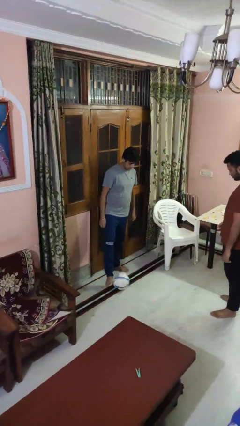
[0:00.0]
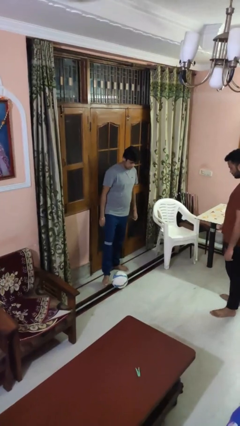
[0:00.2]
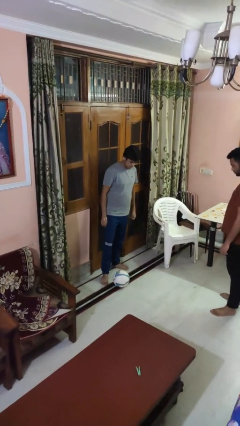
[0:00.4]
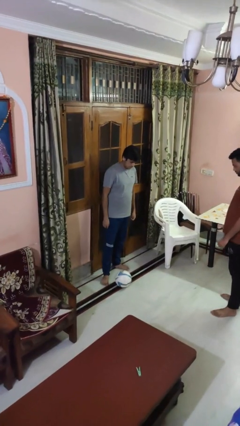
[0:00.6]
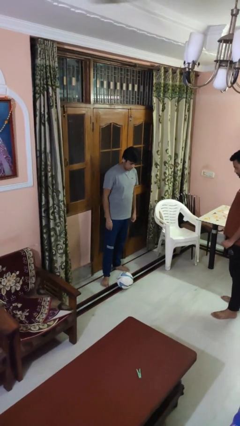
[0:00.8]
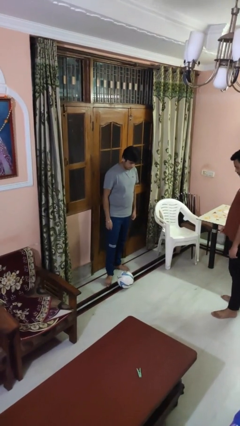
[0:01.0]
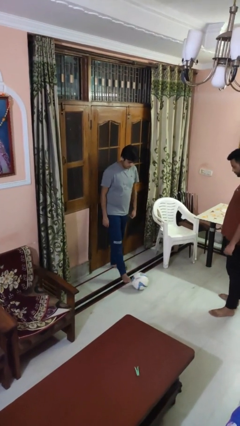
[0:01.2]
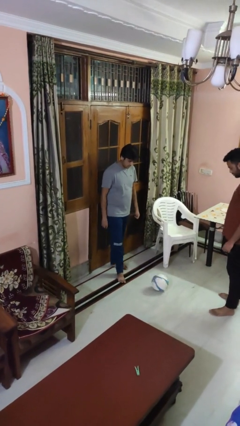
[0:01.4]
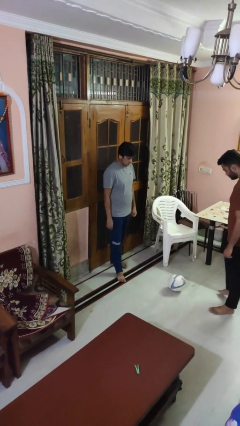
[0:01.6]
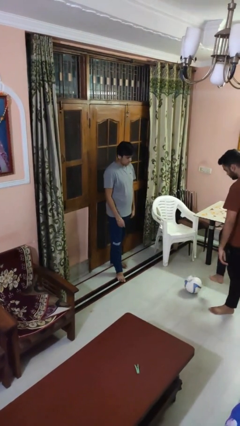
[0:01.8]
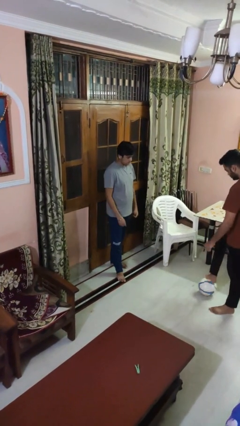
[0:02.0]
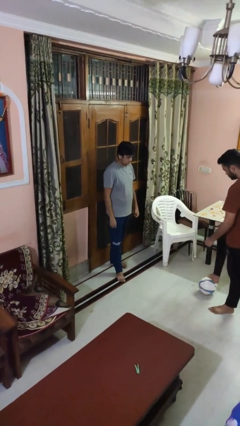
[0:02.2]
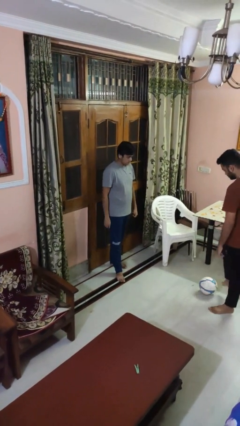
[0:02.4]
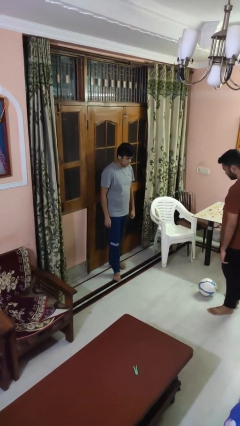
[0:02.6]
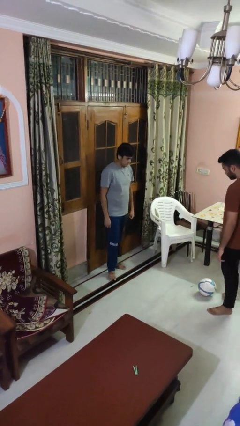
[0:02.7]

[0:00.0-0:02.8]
person kicks object to person

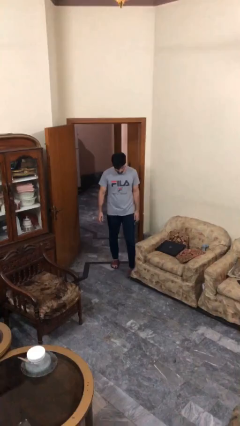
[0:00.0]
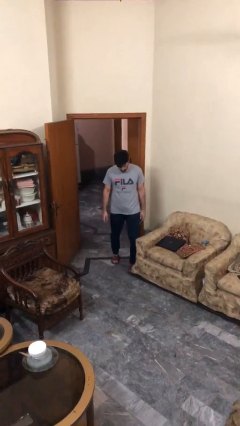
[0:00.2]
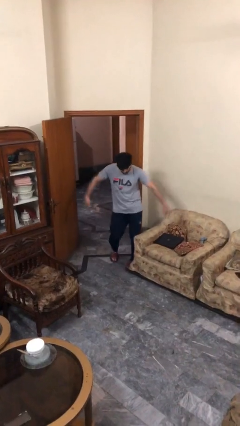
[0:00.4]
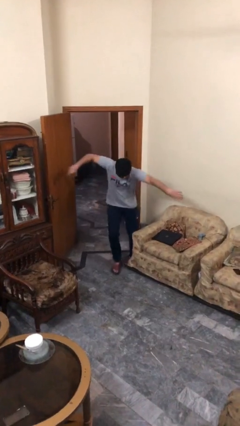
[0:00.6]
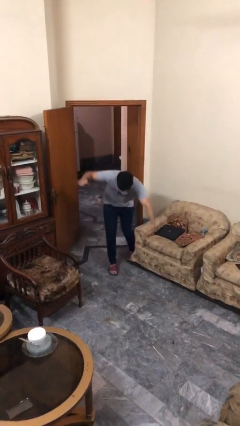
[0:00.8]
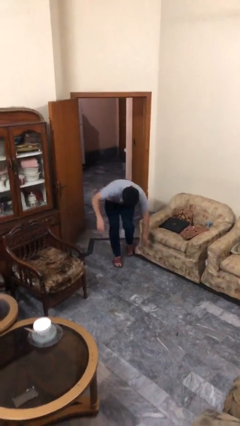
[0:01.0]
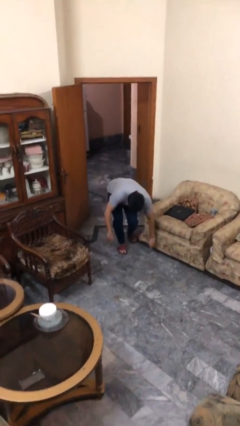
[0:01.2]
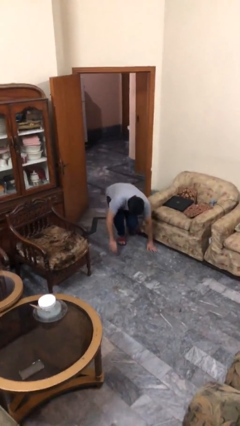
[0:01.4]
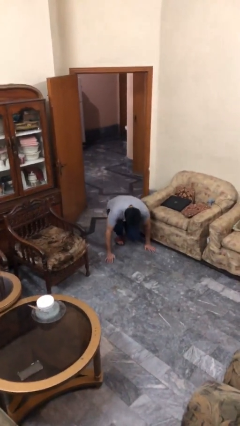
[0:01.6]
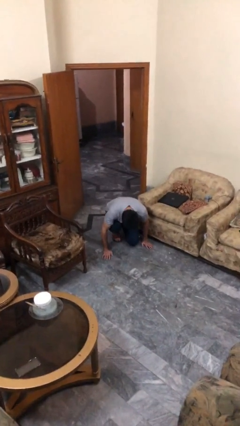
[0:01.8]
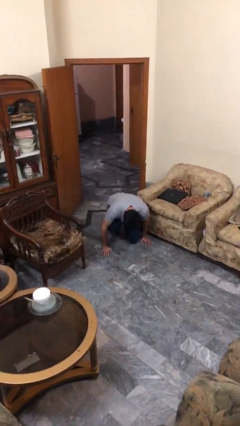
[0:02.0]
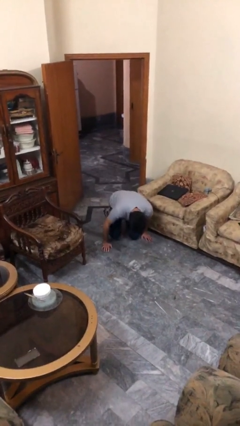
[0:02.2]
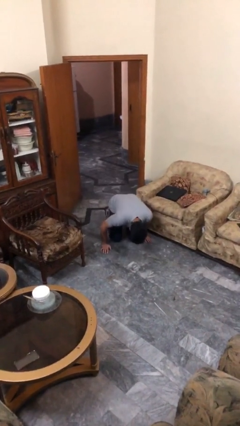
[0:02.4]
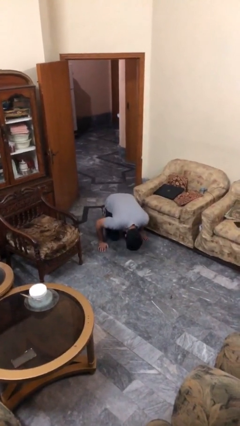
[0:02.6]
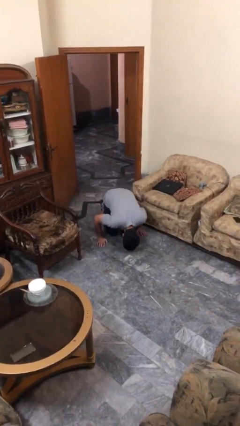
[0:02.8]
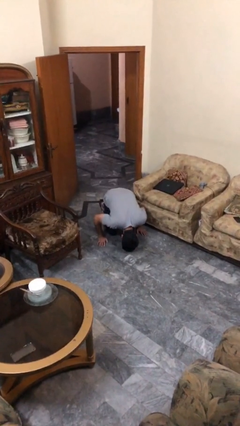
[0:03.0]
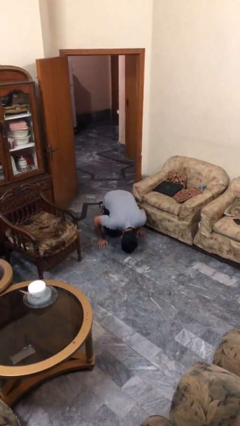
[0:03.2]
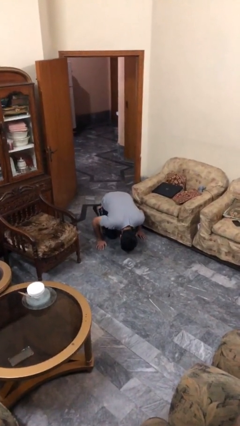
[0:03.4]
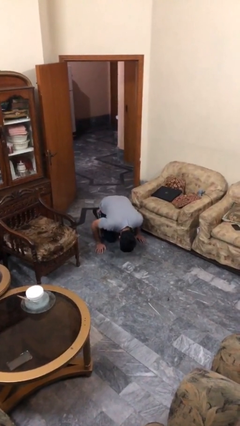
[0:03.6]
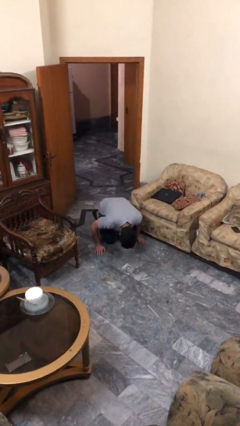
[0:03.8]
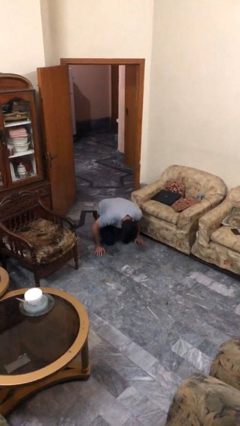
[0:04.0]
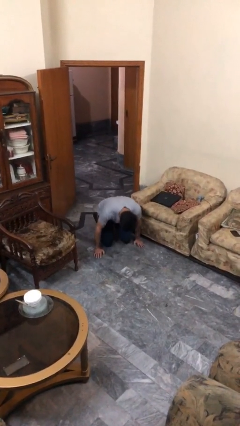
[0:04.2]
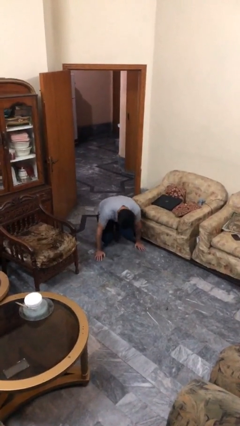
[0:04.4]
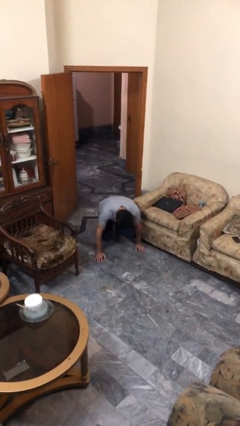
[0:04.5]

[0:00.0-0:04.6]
person trips on object on floor

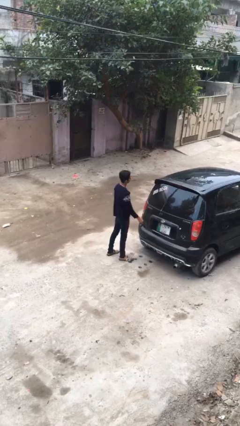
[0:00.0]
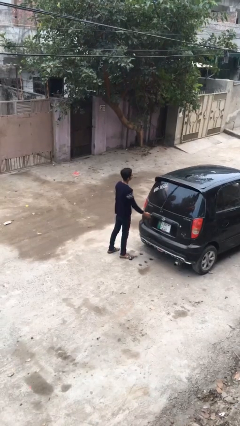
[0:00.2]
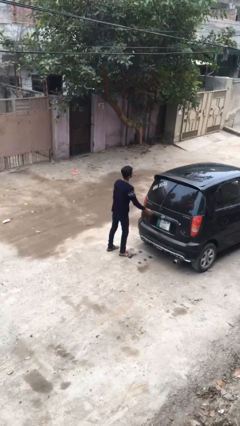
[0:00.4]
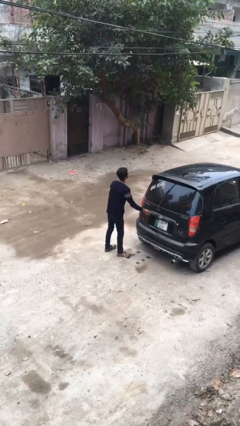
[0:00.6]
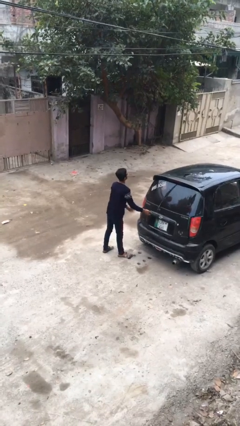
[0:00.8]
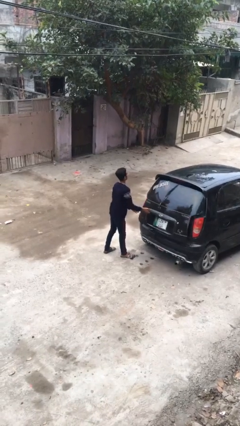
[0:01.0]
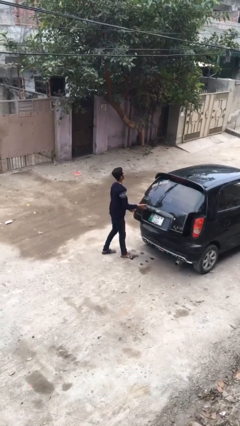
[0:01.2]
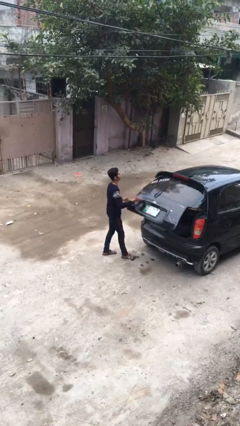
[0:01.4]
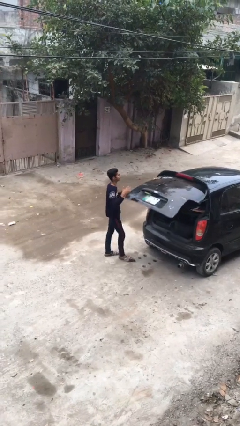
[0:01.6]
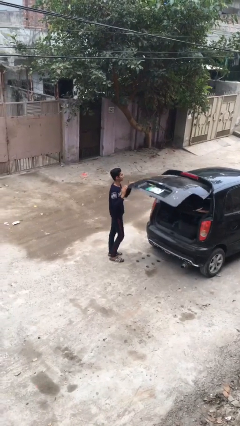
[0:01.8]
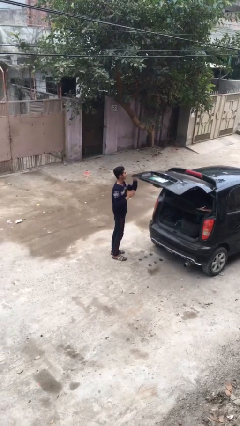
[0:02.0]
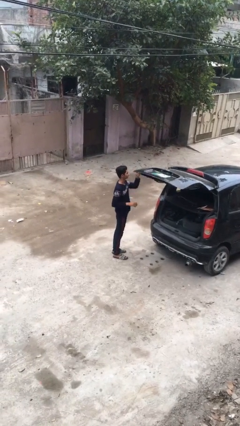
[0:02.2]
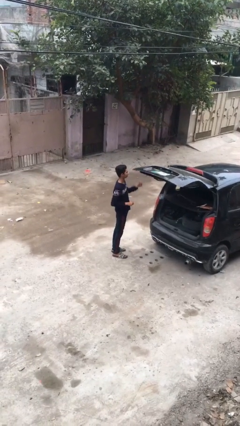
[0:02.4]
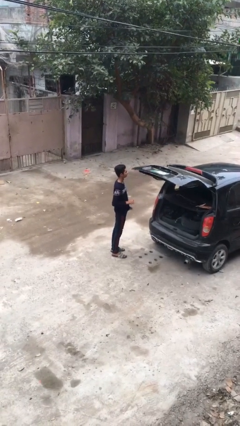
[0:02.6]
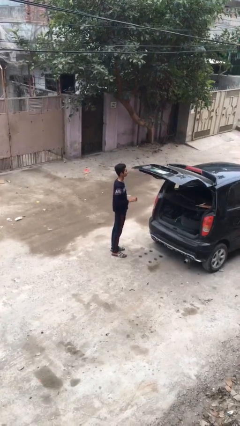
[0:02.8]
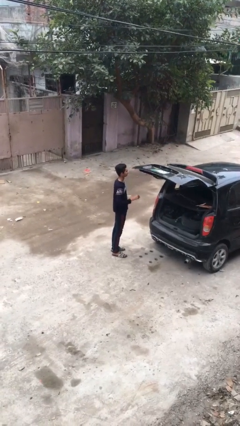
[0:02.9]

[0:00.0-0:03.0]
person opens car trunk

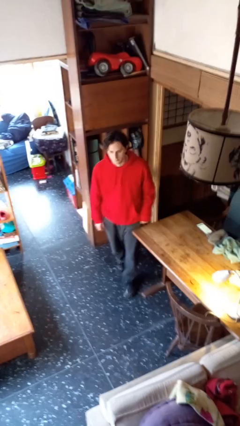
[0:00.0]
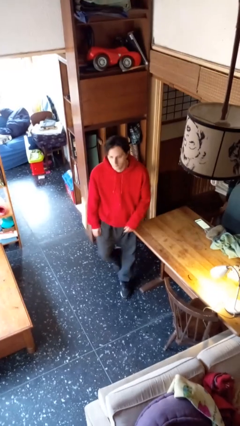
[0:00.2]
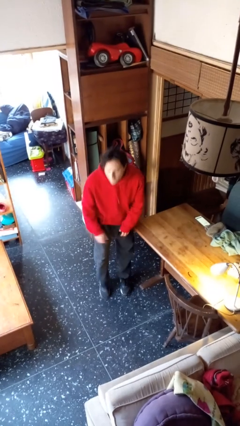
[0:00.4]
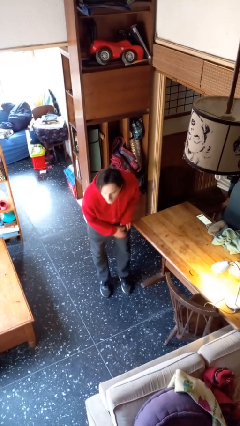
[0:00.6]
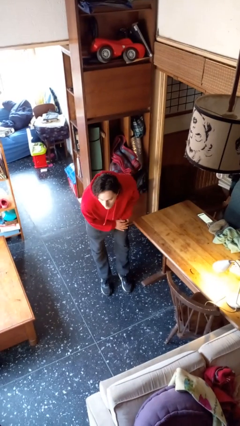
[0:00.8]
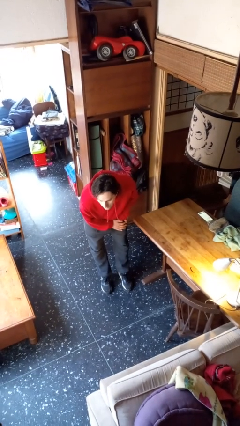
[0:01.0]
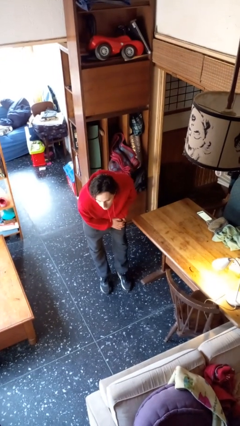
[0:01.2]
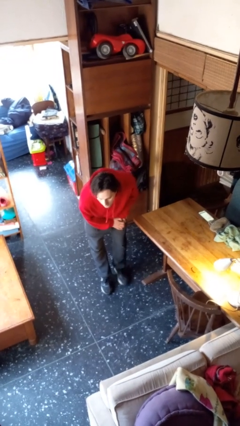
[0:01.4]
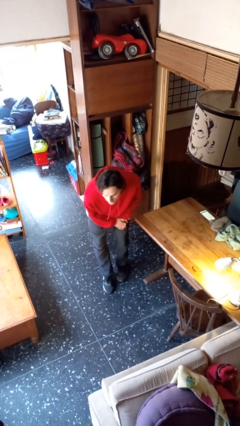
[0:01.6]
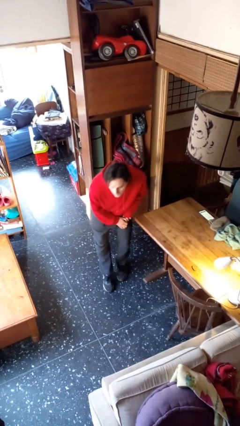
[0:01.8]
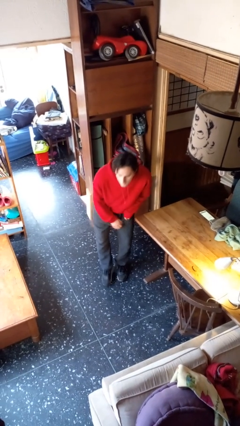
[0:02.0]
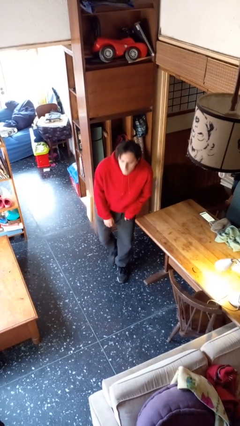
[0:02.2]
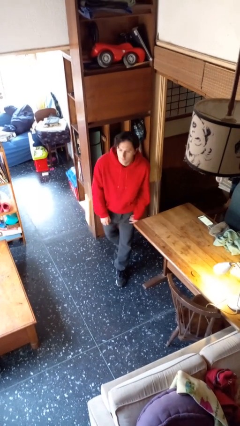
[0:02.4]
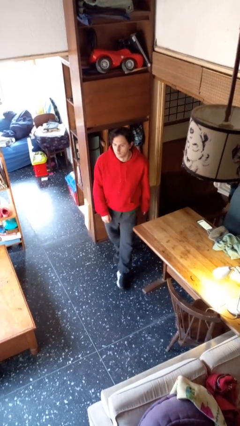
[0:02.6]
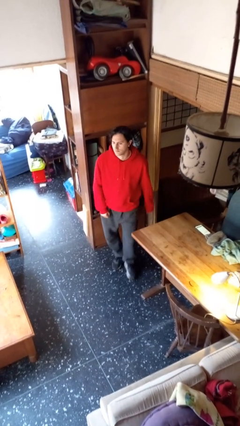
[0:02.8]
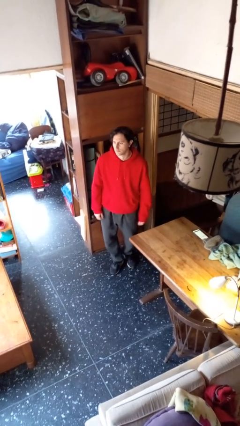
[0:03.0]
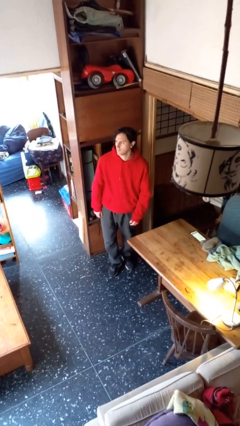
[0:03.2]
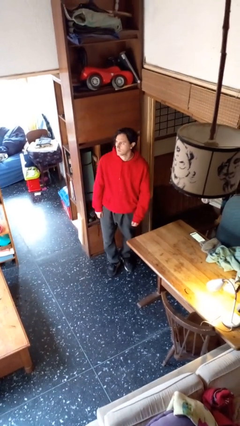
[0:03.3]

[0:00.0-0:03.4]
person bumps into table

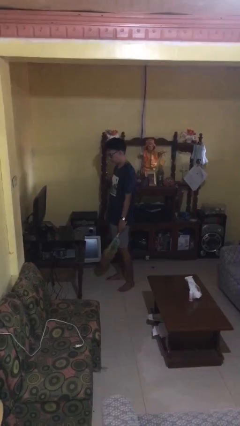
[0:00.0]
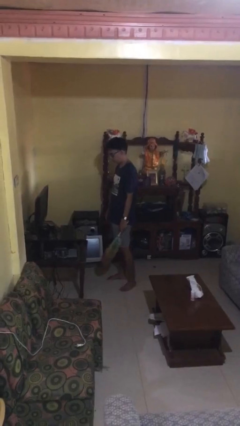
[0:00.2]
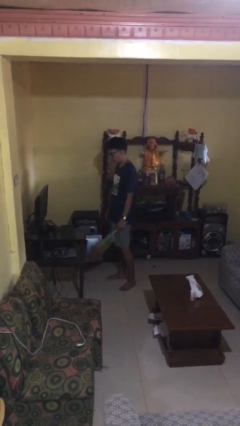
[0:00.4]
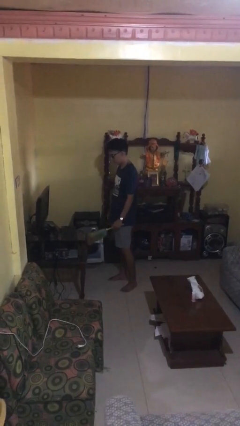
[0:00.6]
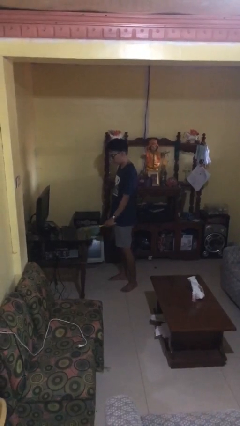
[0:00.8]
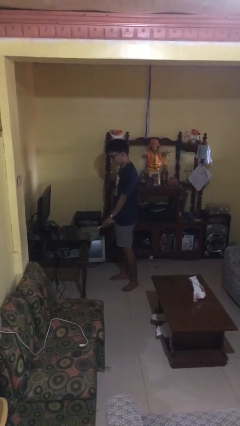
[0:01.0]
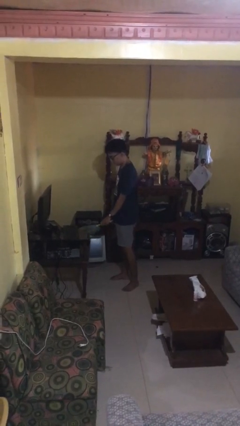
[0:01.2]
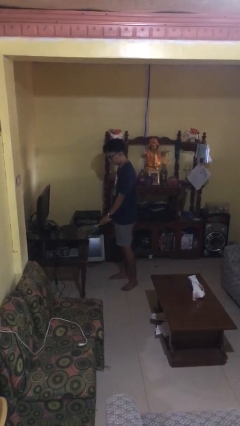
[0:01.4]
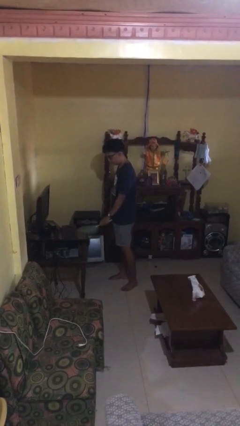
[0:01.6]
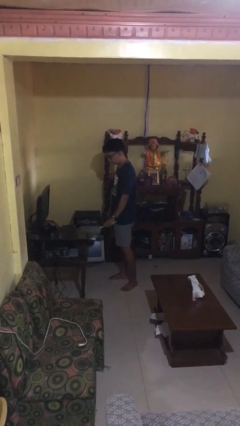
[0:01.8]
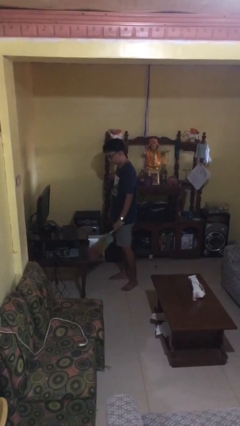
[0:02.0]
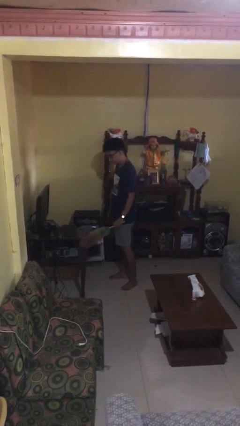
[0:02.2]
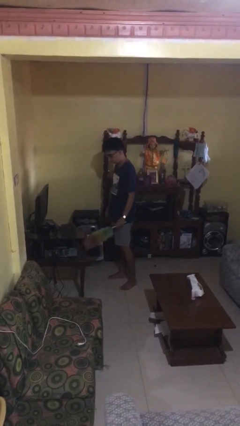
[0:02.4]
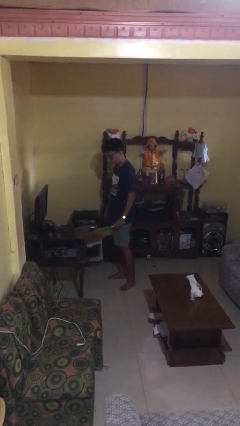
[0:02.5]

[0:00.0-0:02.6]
person dusts furniture

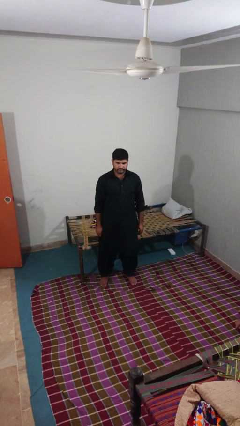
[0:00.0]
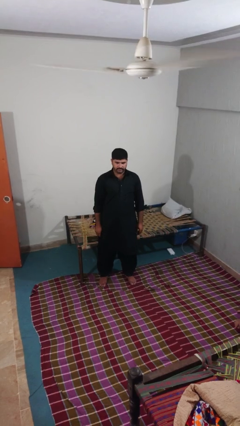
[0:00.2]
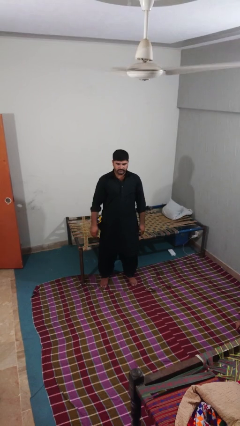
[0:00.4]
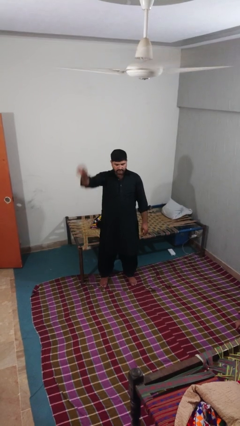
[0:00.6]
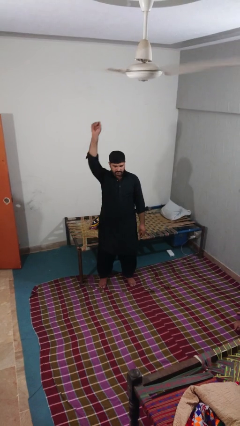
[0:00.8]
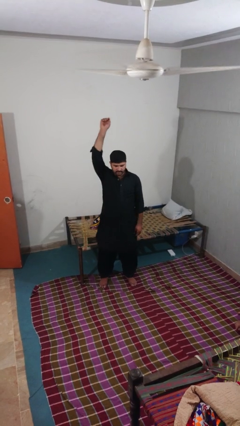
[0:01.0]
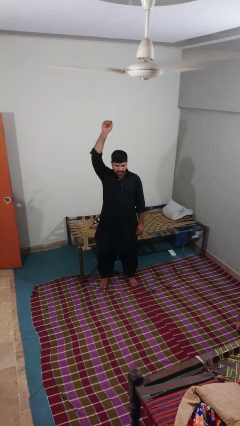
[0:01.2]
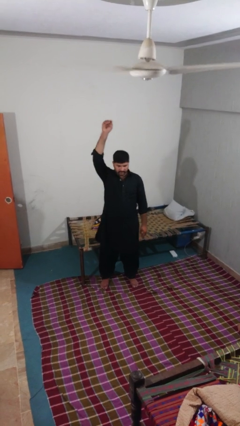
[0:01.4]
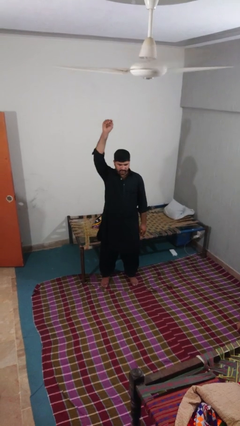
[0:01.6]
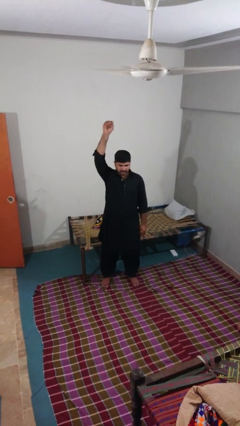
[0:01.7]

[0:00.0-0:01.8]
person gestures raise hand
